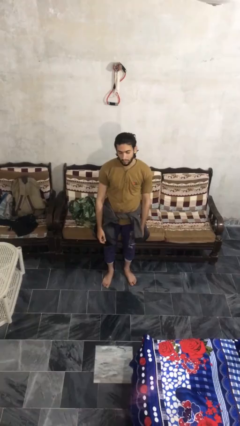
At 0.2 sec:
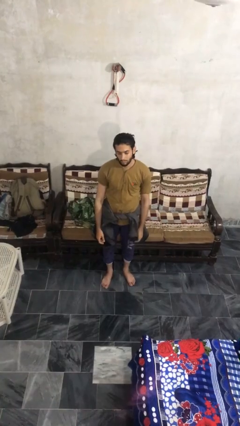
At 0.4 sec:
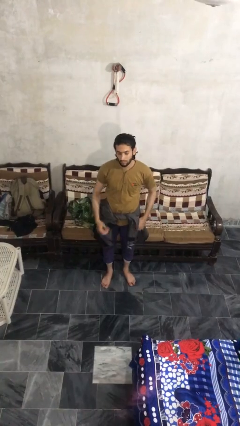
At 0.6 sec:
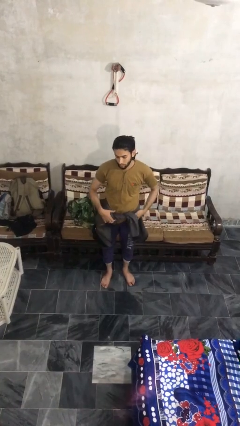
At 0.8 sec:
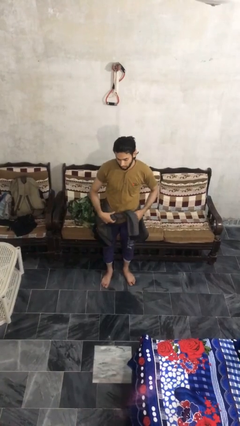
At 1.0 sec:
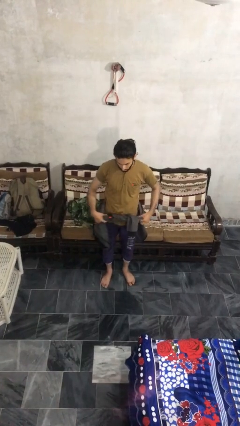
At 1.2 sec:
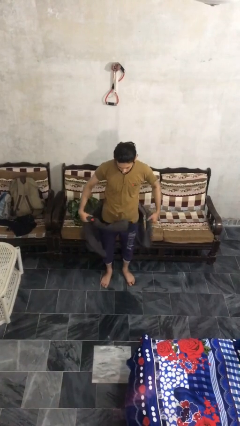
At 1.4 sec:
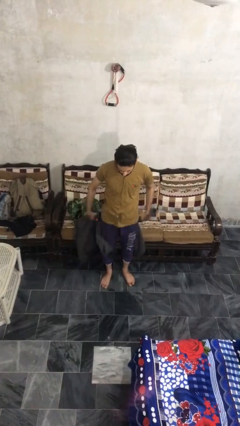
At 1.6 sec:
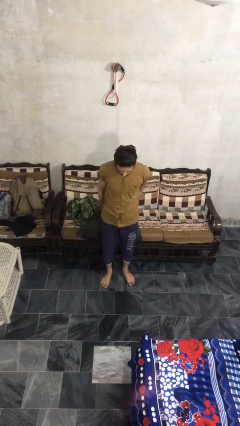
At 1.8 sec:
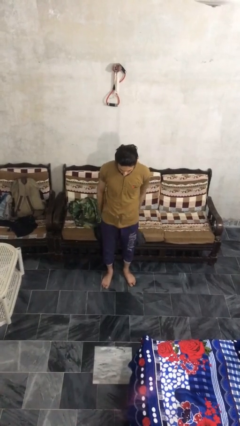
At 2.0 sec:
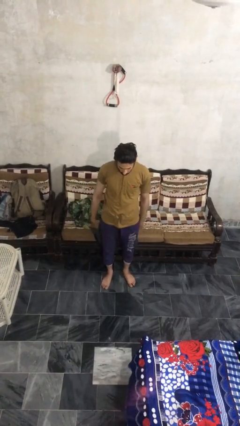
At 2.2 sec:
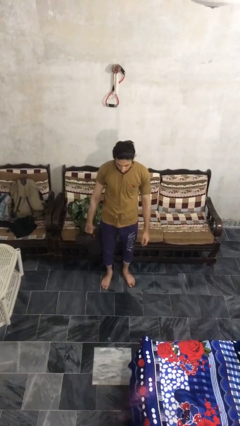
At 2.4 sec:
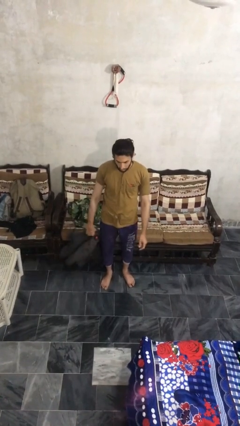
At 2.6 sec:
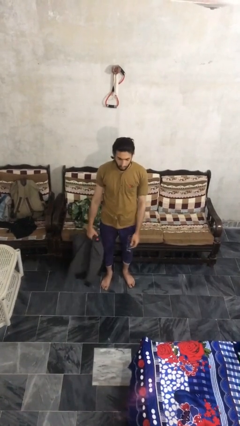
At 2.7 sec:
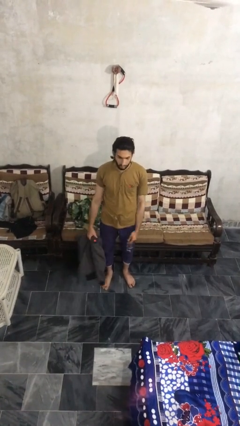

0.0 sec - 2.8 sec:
person unties jacket around waist

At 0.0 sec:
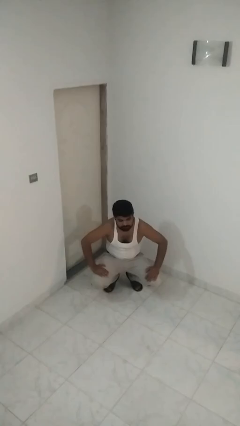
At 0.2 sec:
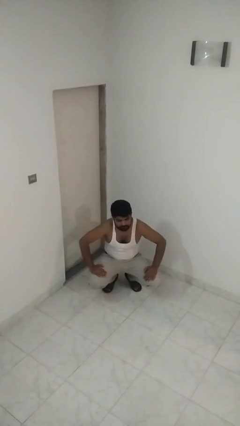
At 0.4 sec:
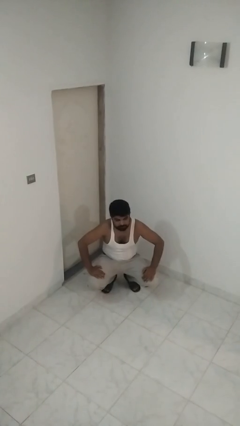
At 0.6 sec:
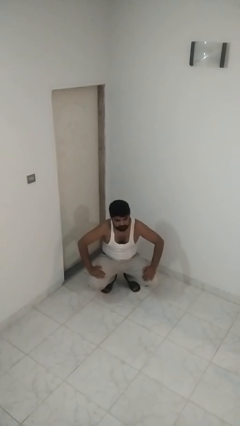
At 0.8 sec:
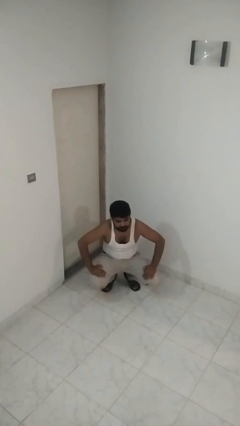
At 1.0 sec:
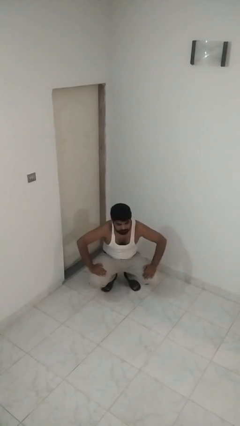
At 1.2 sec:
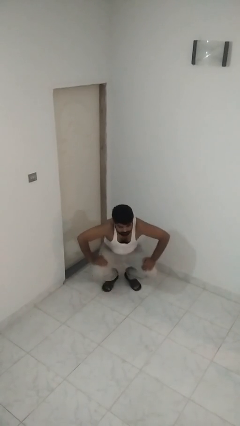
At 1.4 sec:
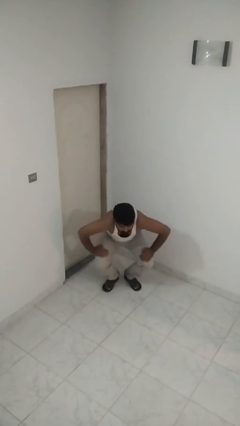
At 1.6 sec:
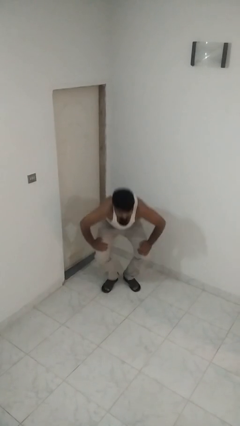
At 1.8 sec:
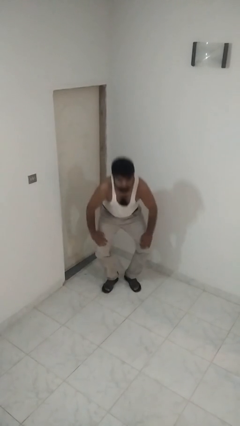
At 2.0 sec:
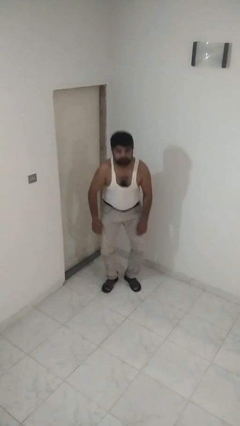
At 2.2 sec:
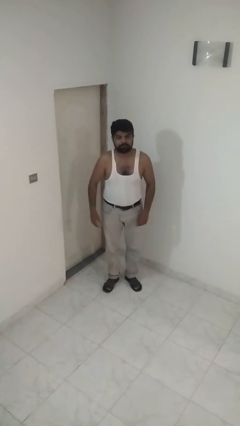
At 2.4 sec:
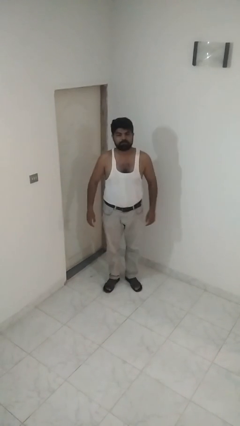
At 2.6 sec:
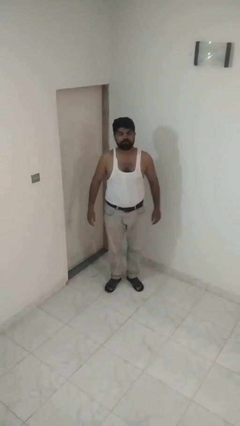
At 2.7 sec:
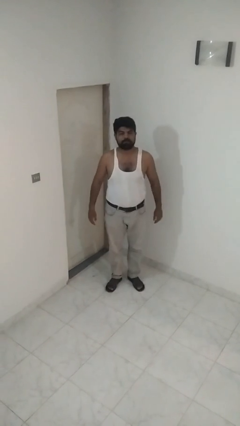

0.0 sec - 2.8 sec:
person stands up

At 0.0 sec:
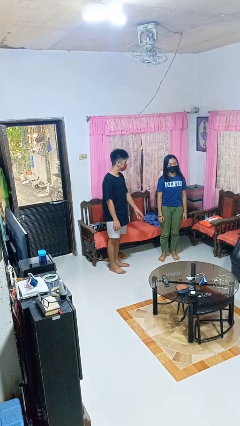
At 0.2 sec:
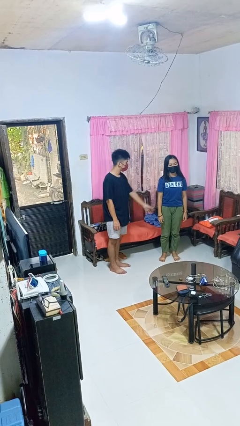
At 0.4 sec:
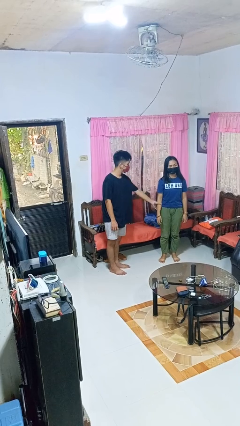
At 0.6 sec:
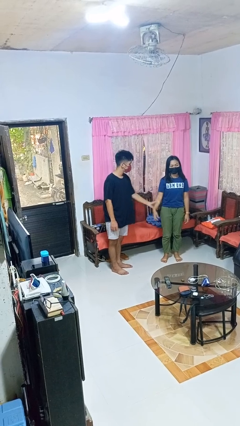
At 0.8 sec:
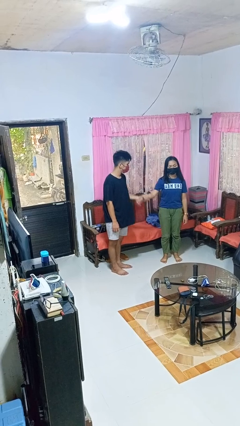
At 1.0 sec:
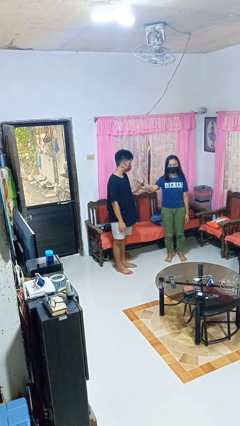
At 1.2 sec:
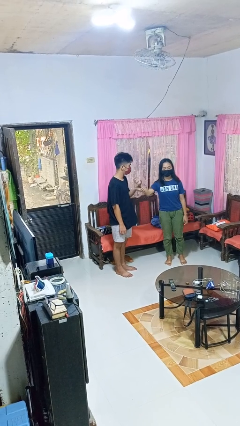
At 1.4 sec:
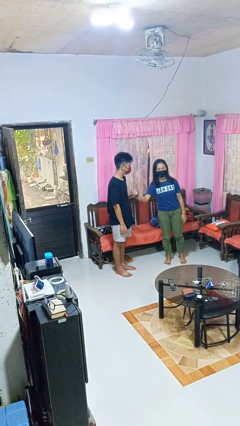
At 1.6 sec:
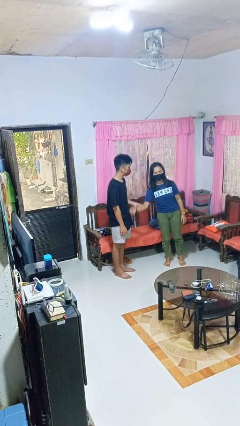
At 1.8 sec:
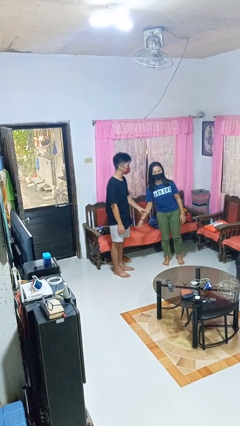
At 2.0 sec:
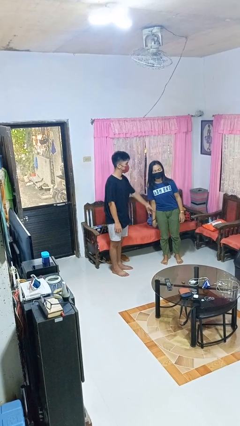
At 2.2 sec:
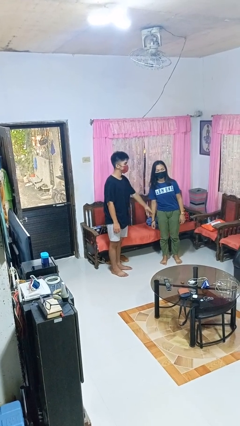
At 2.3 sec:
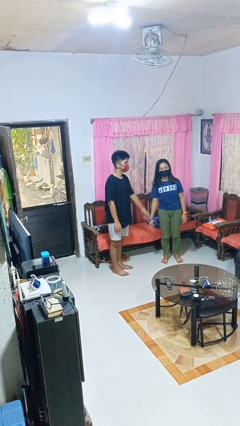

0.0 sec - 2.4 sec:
person grabs person by forearm

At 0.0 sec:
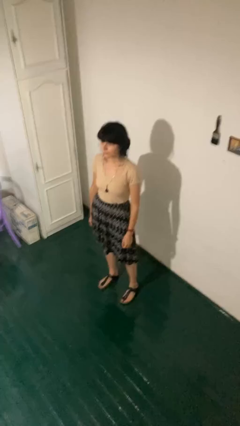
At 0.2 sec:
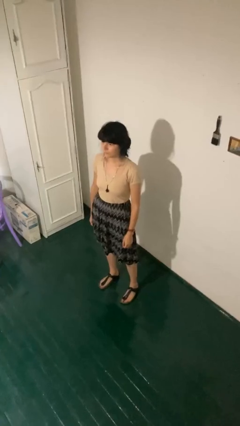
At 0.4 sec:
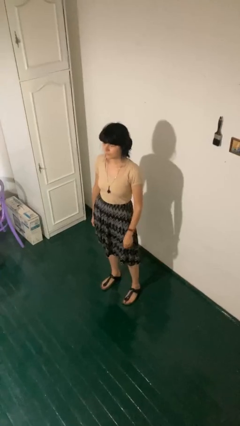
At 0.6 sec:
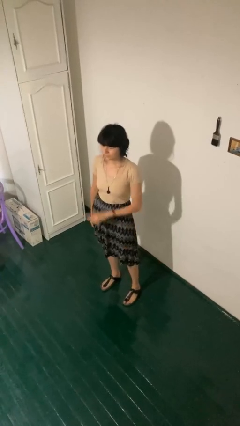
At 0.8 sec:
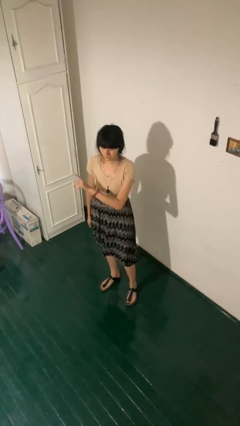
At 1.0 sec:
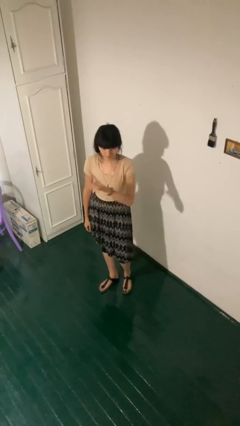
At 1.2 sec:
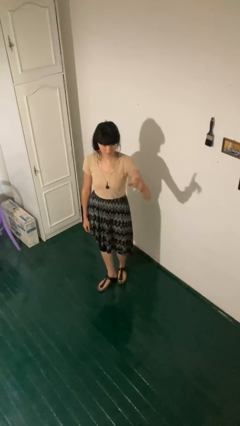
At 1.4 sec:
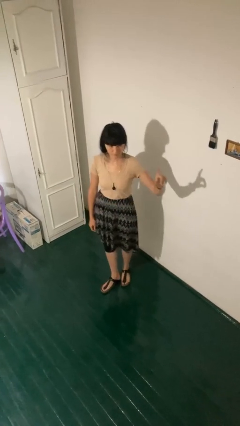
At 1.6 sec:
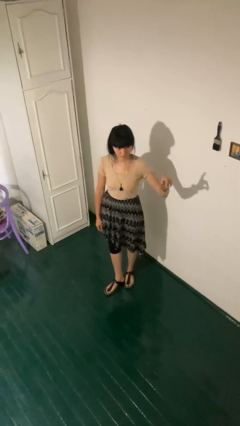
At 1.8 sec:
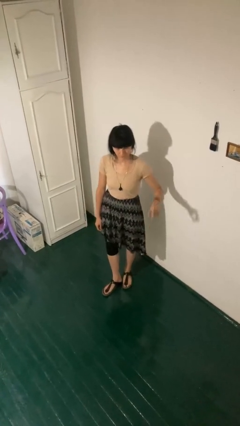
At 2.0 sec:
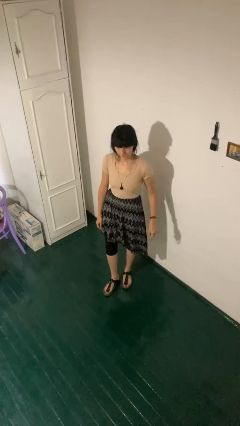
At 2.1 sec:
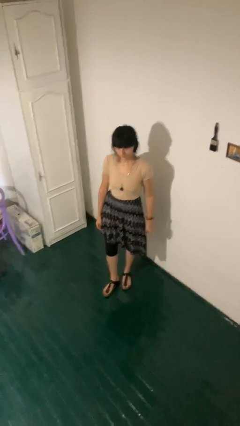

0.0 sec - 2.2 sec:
person gestures swipe left

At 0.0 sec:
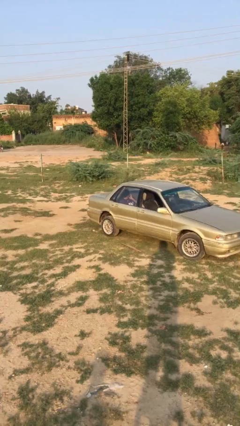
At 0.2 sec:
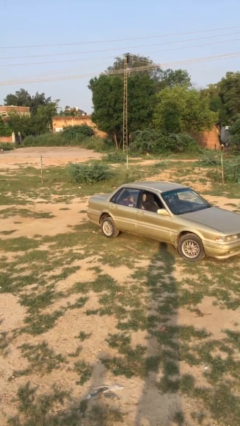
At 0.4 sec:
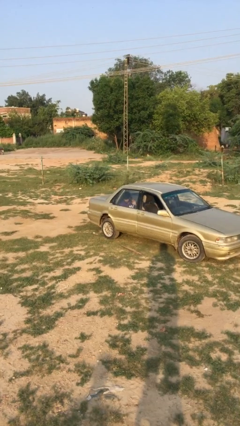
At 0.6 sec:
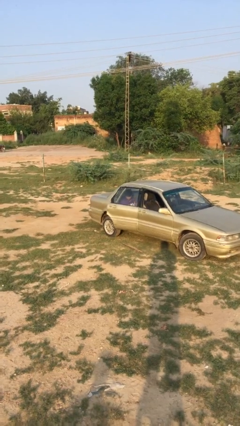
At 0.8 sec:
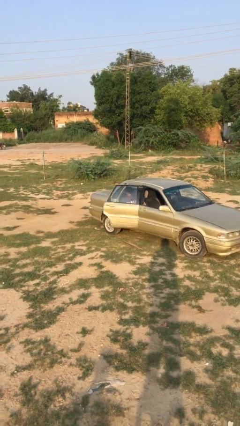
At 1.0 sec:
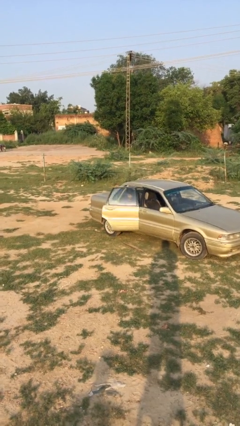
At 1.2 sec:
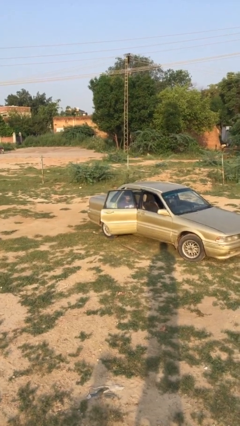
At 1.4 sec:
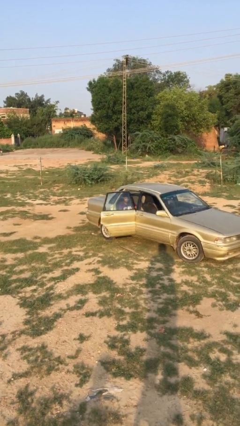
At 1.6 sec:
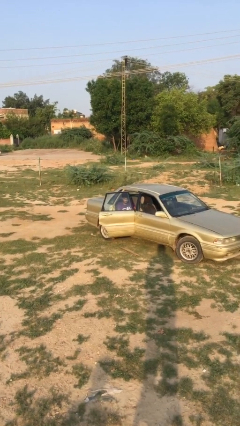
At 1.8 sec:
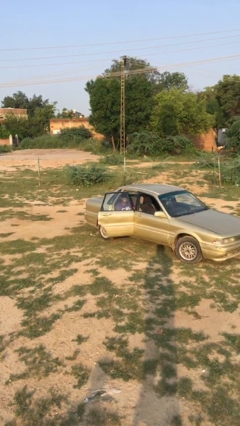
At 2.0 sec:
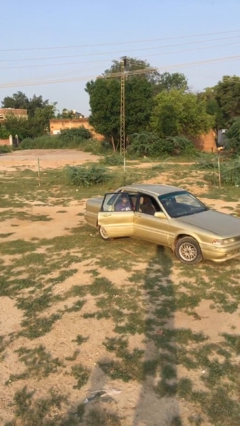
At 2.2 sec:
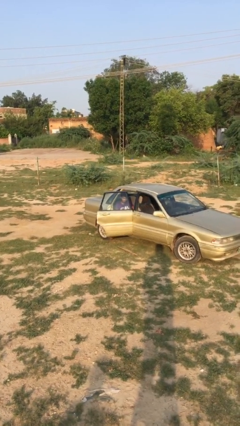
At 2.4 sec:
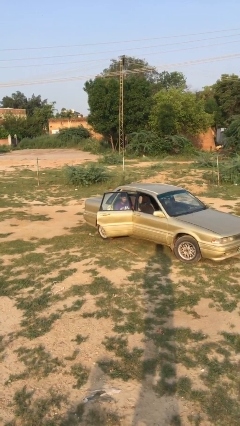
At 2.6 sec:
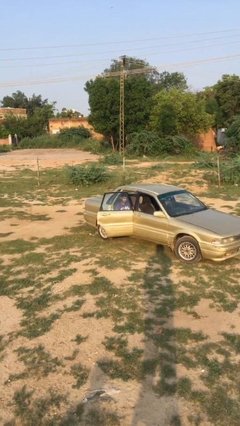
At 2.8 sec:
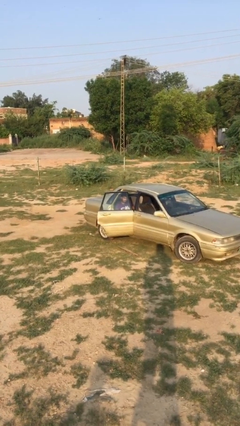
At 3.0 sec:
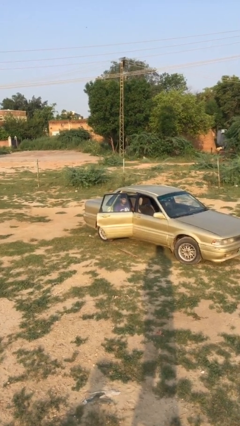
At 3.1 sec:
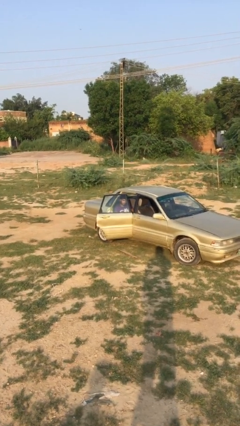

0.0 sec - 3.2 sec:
person opens car door

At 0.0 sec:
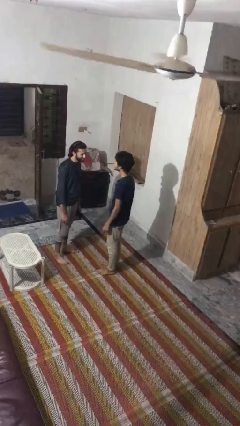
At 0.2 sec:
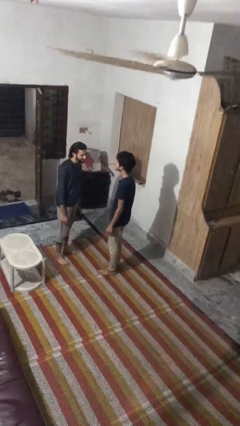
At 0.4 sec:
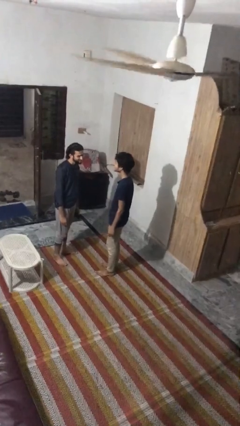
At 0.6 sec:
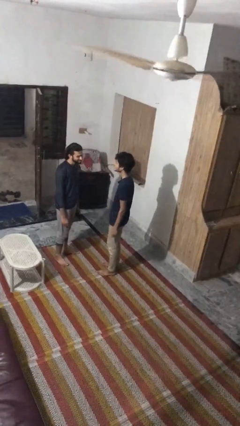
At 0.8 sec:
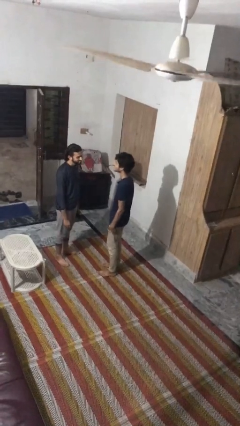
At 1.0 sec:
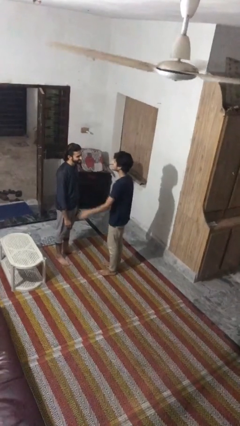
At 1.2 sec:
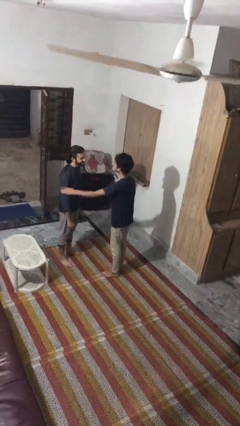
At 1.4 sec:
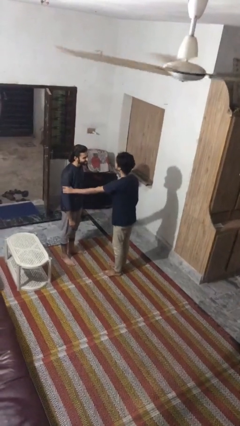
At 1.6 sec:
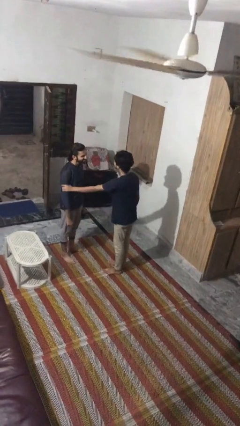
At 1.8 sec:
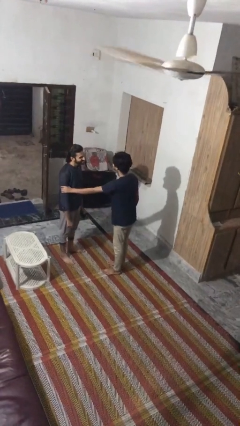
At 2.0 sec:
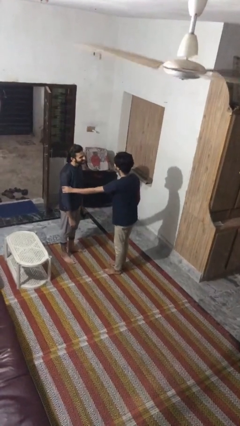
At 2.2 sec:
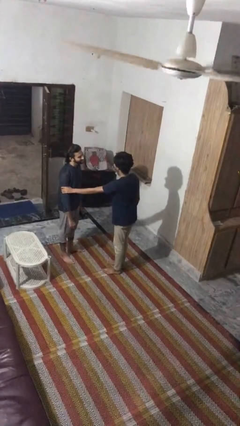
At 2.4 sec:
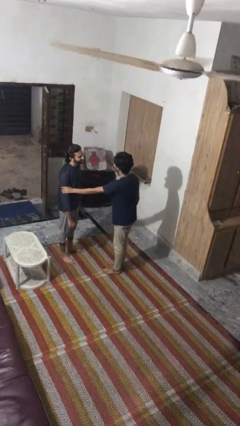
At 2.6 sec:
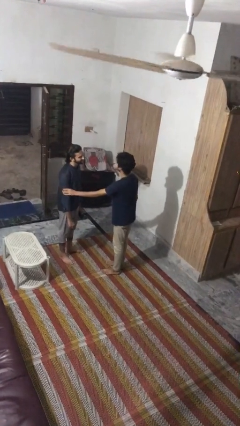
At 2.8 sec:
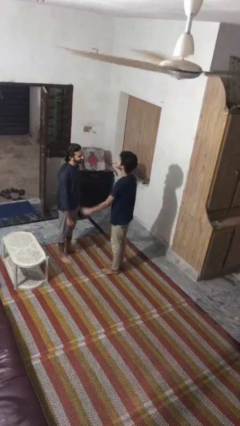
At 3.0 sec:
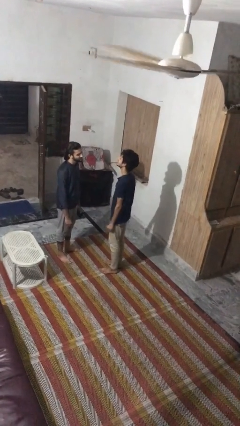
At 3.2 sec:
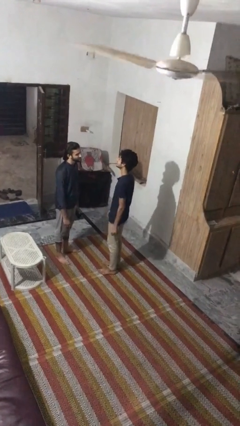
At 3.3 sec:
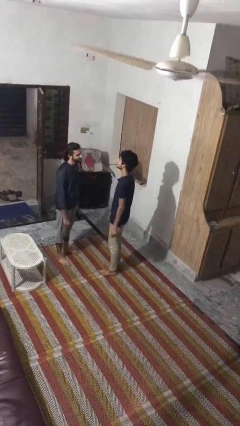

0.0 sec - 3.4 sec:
person grabs person by bicep

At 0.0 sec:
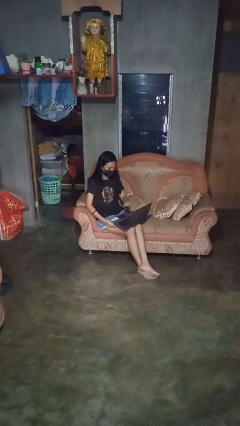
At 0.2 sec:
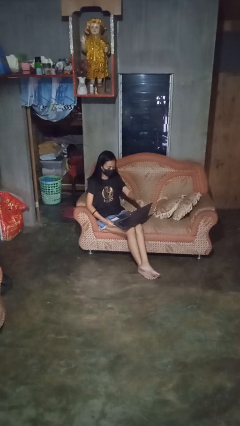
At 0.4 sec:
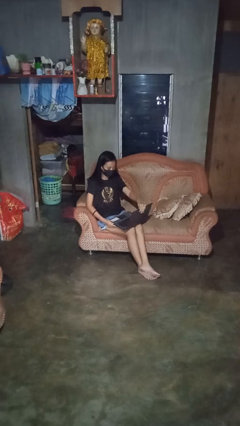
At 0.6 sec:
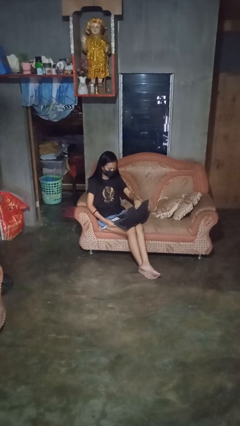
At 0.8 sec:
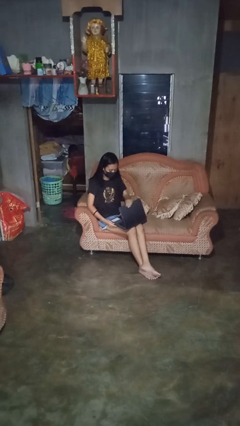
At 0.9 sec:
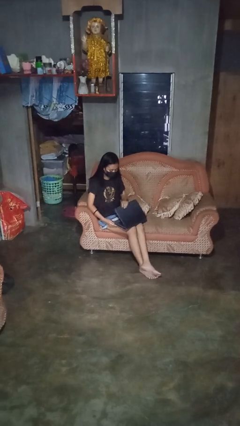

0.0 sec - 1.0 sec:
person closes laptop
